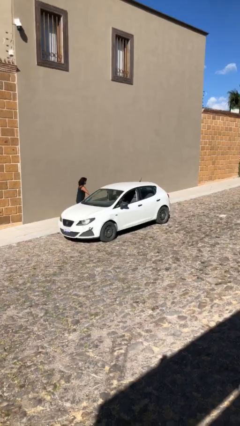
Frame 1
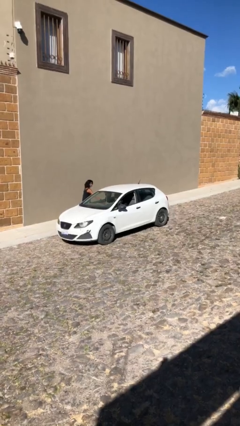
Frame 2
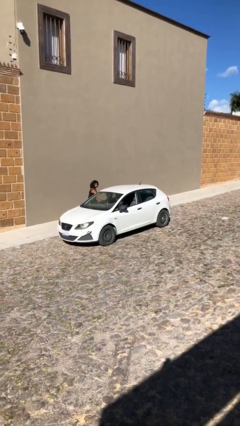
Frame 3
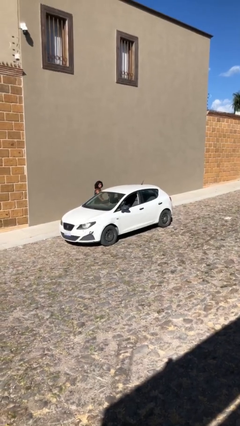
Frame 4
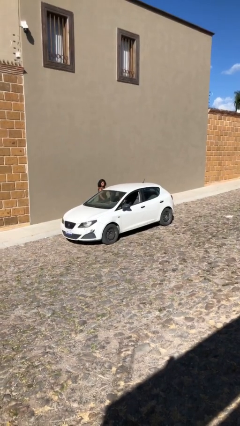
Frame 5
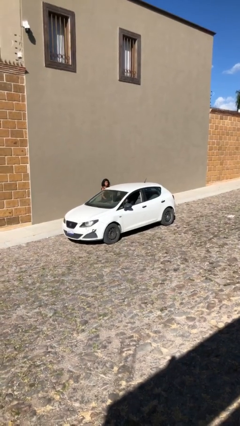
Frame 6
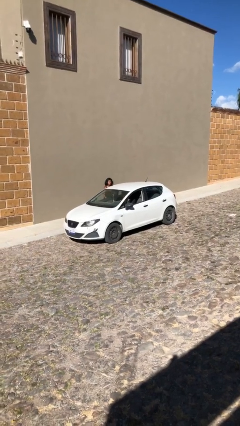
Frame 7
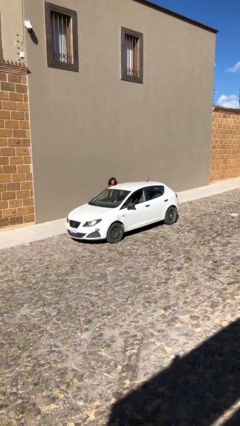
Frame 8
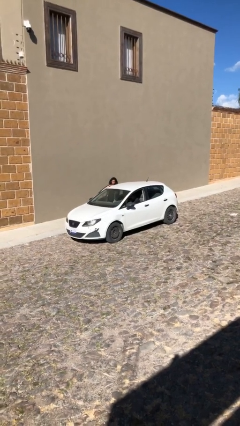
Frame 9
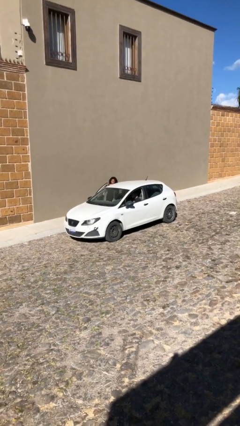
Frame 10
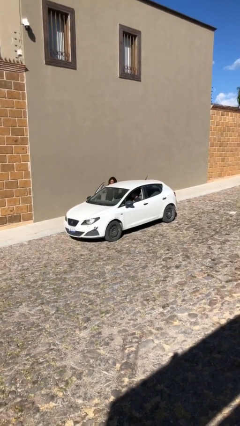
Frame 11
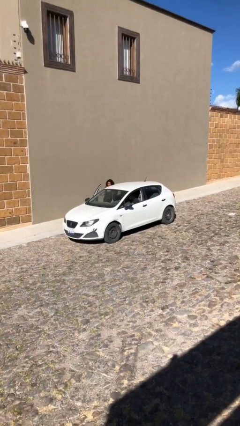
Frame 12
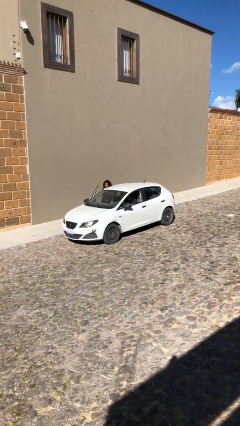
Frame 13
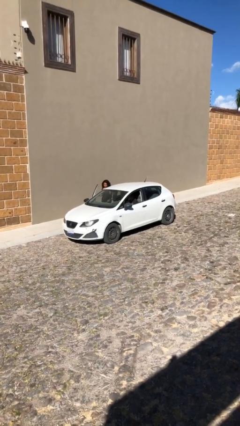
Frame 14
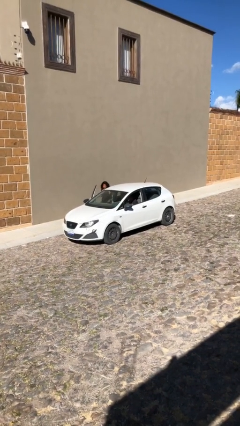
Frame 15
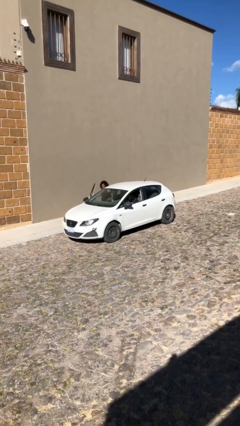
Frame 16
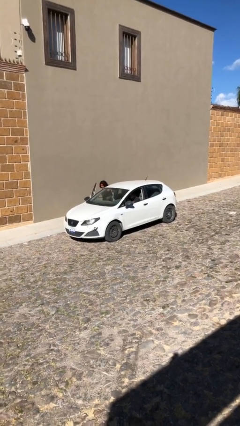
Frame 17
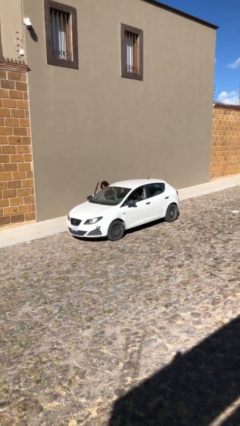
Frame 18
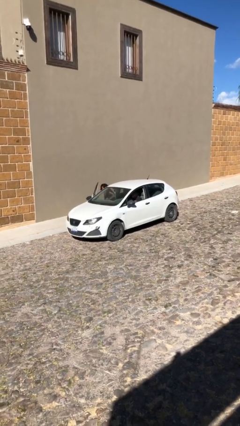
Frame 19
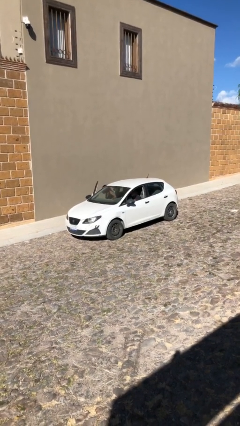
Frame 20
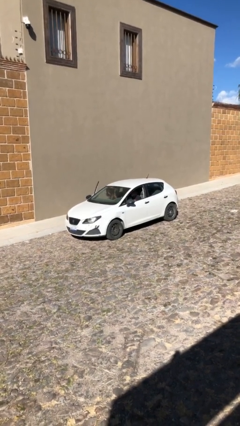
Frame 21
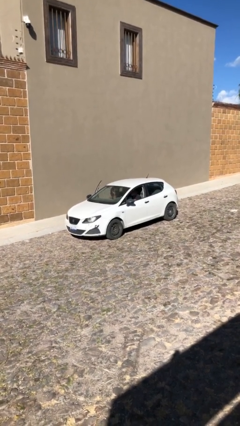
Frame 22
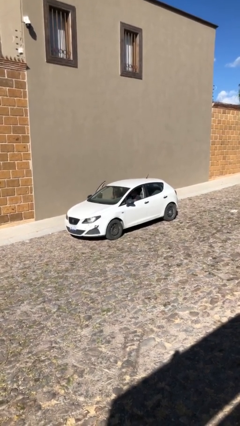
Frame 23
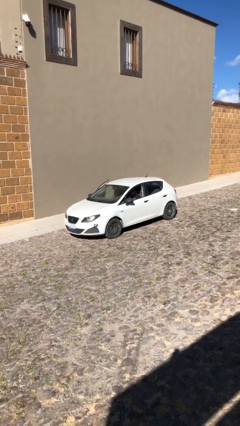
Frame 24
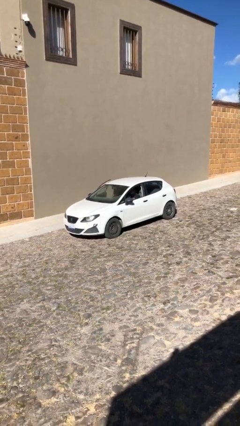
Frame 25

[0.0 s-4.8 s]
car picks up person

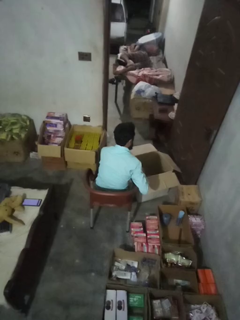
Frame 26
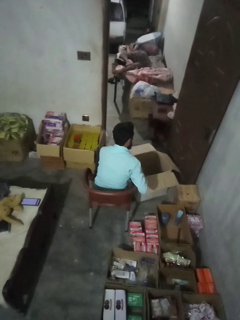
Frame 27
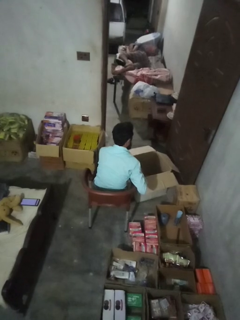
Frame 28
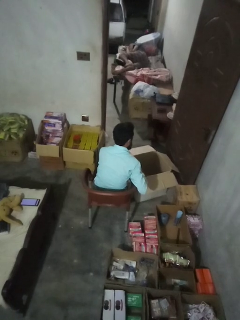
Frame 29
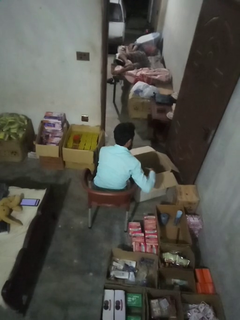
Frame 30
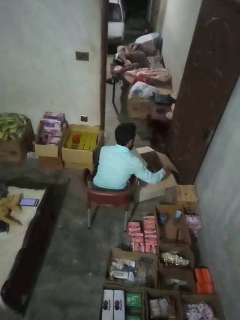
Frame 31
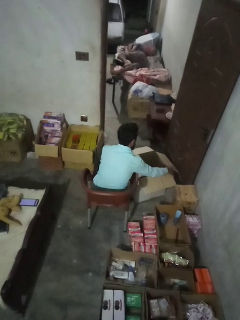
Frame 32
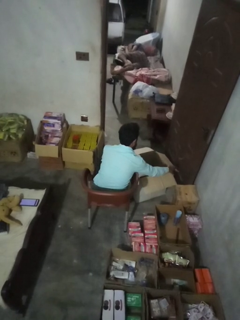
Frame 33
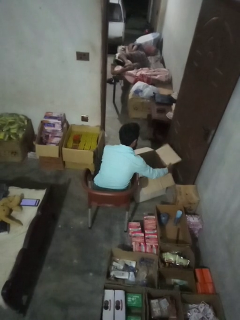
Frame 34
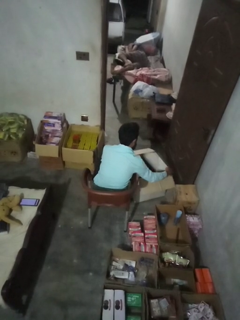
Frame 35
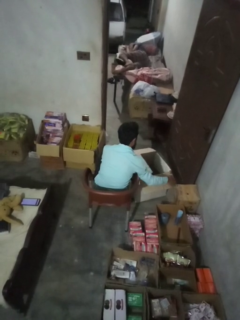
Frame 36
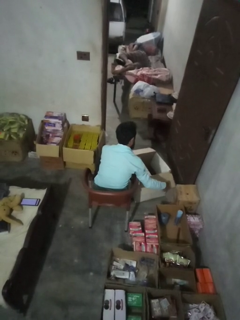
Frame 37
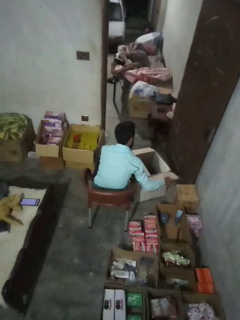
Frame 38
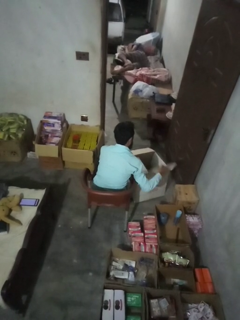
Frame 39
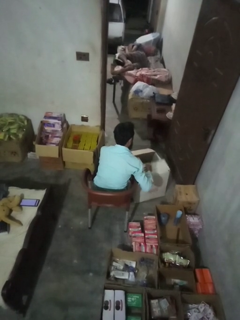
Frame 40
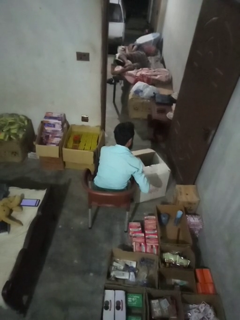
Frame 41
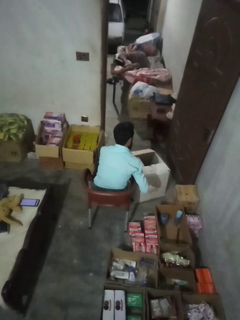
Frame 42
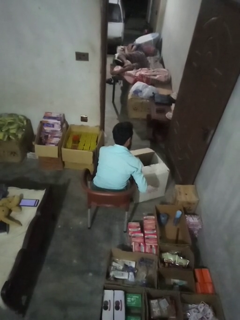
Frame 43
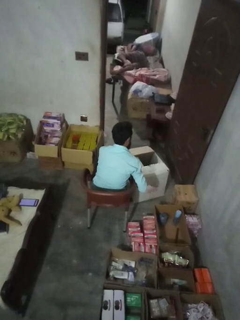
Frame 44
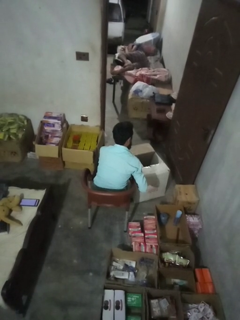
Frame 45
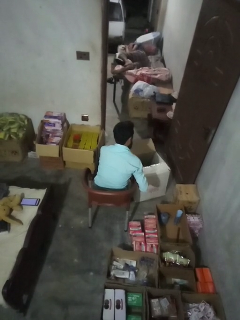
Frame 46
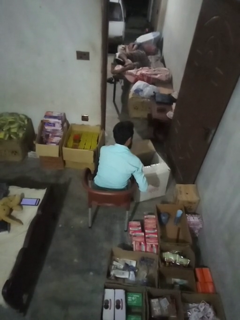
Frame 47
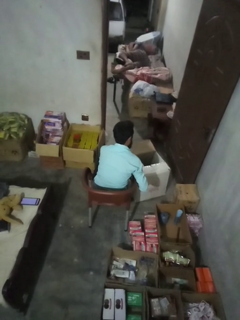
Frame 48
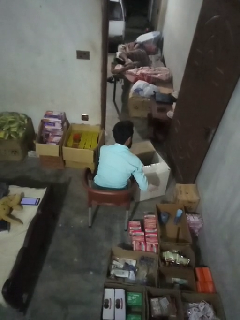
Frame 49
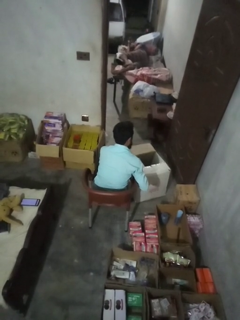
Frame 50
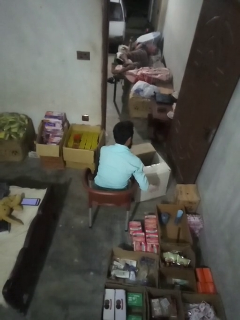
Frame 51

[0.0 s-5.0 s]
person closes box

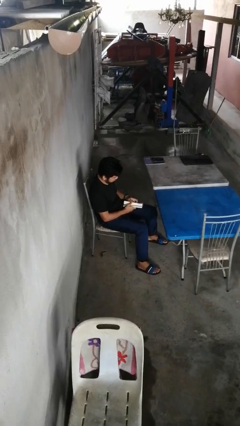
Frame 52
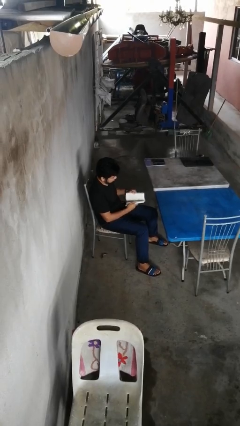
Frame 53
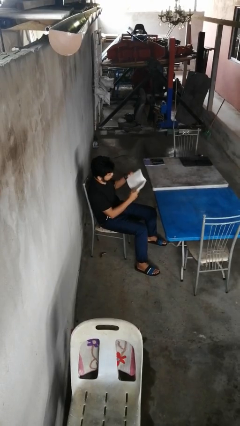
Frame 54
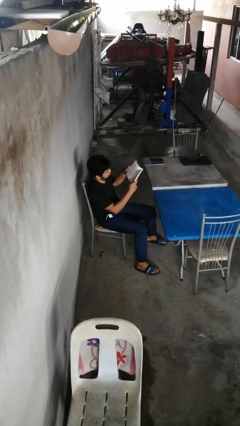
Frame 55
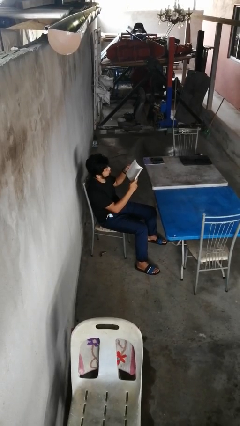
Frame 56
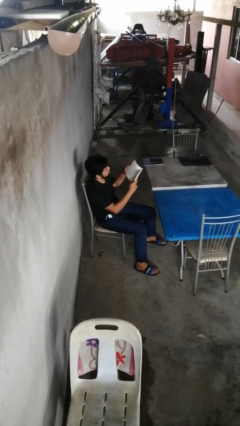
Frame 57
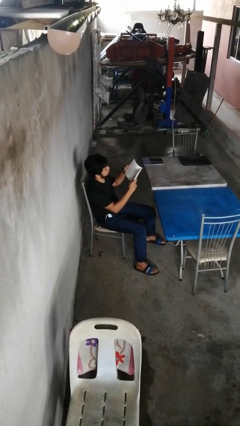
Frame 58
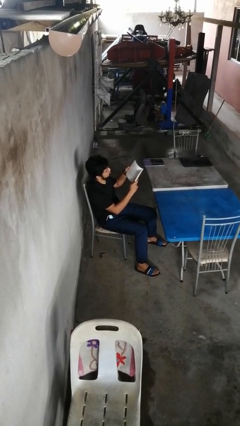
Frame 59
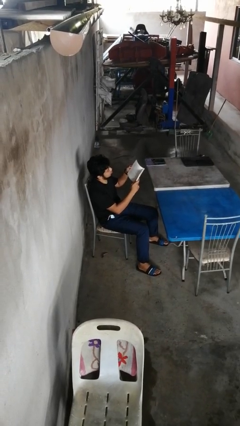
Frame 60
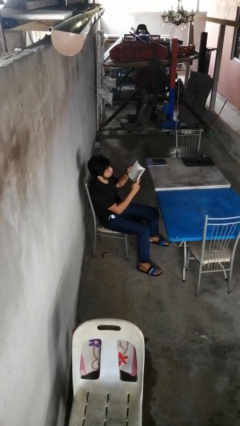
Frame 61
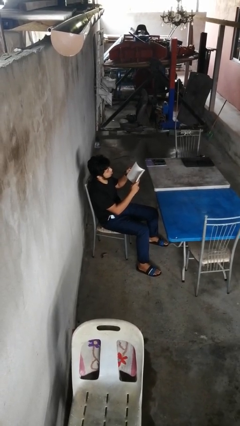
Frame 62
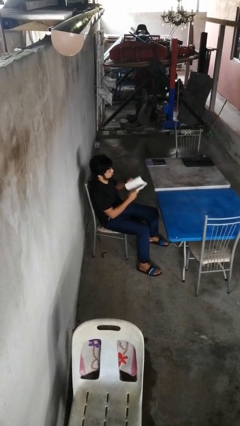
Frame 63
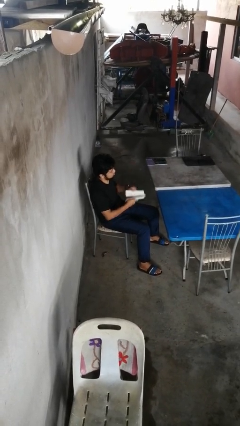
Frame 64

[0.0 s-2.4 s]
person reads book

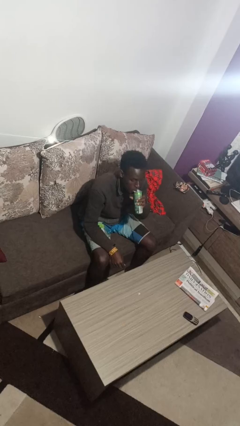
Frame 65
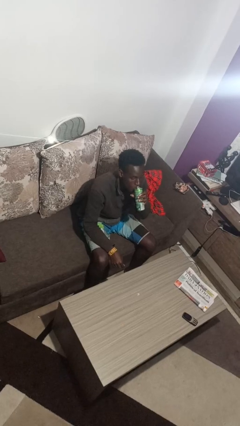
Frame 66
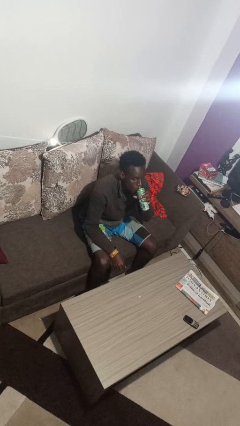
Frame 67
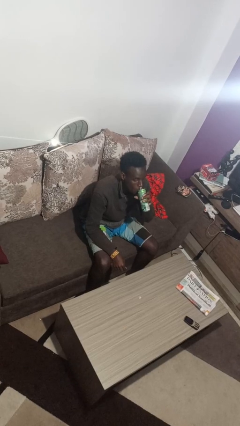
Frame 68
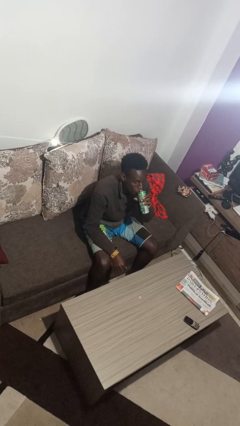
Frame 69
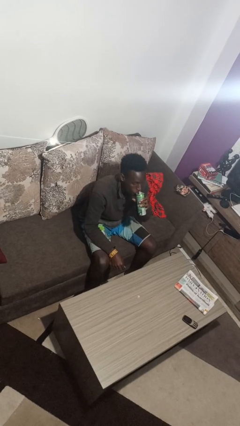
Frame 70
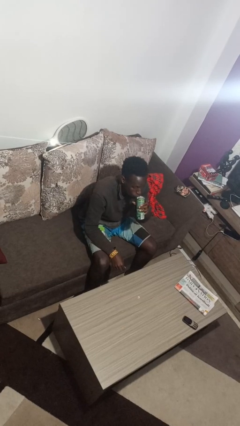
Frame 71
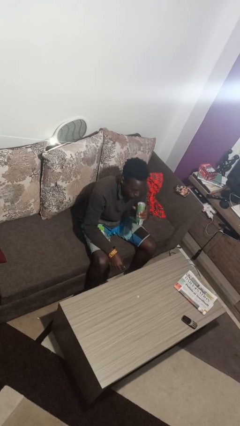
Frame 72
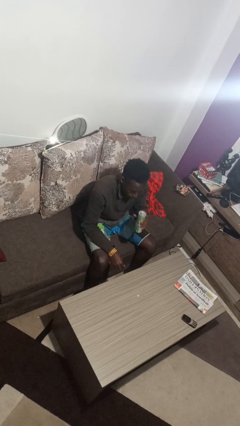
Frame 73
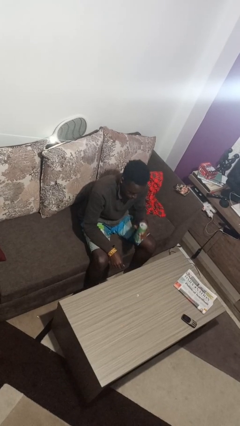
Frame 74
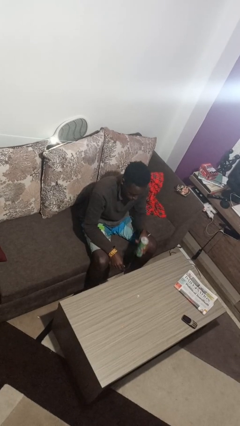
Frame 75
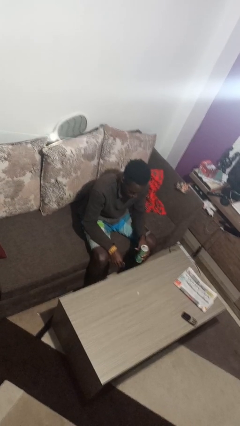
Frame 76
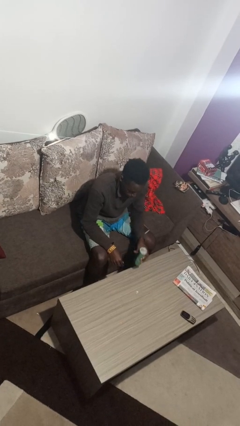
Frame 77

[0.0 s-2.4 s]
person drinks from beverage can

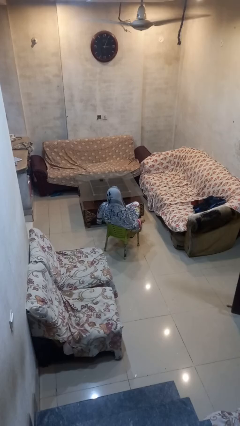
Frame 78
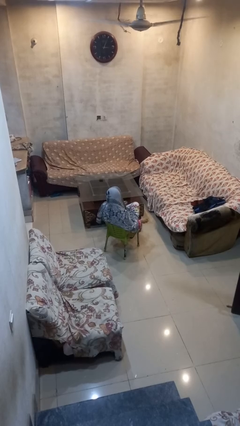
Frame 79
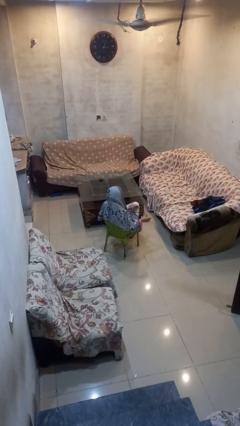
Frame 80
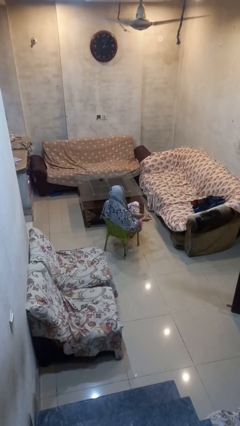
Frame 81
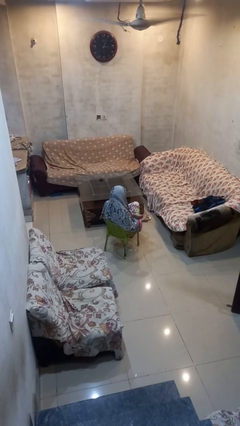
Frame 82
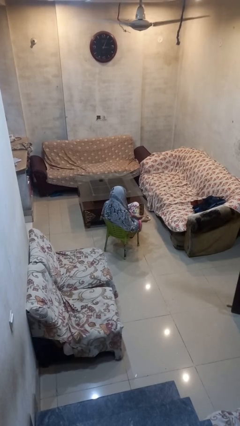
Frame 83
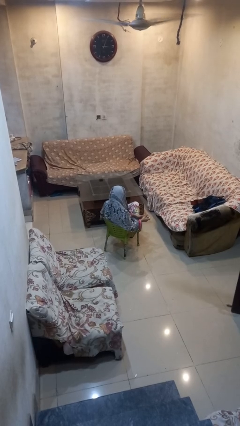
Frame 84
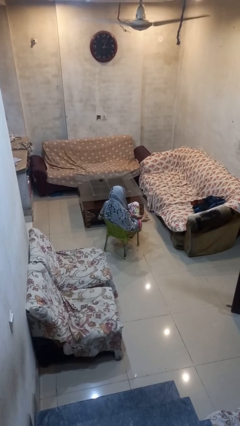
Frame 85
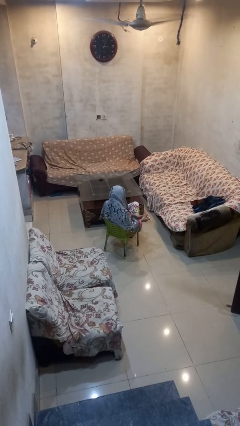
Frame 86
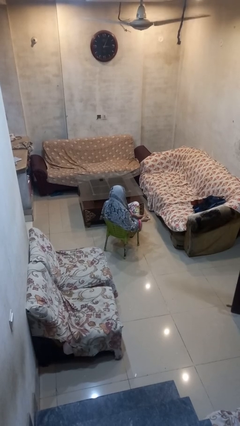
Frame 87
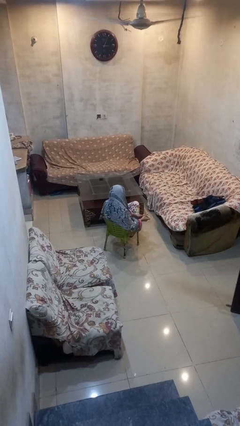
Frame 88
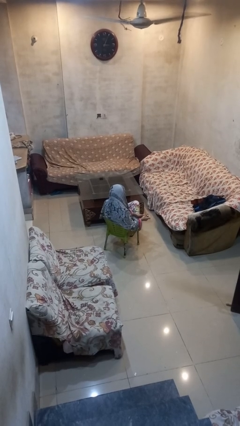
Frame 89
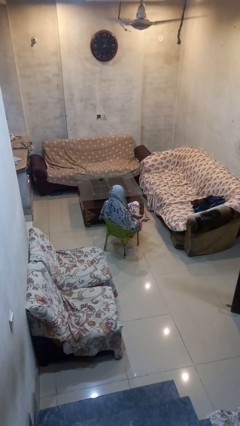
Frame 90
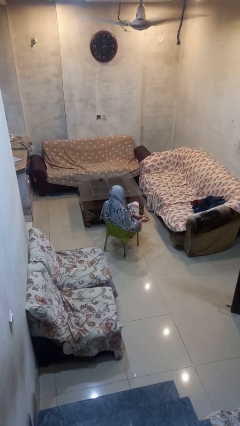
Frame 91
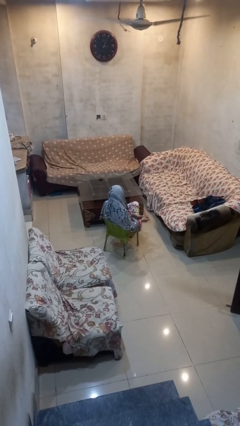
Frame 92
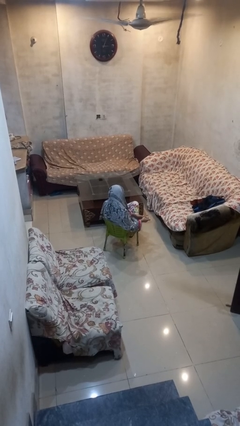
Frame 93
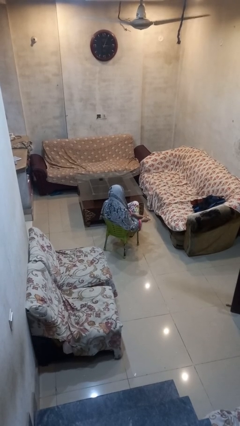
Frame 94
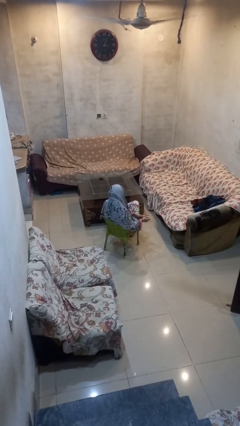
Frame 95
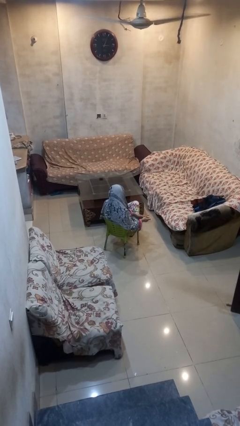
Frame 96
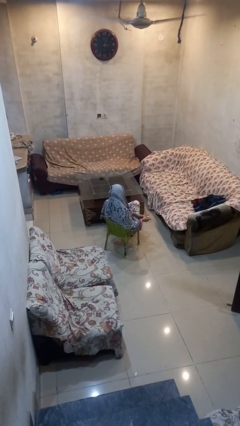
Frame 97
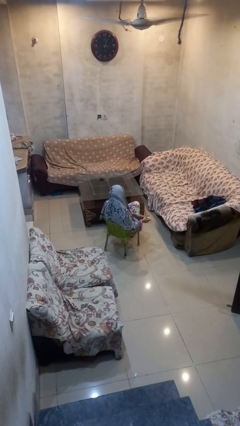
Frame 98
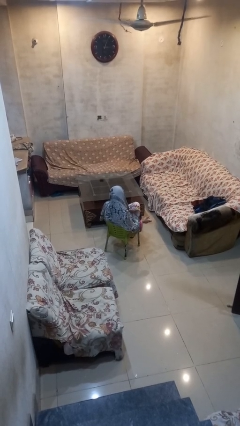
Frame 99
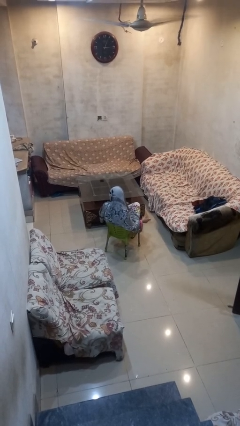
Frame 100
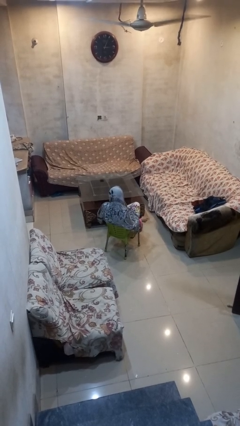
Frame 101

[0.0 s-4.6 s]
person clips fingernails
